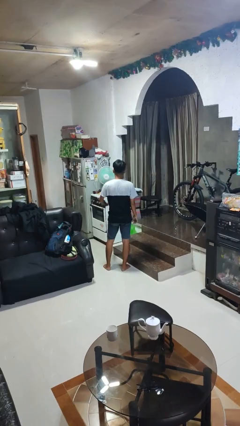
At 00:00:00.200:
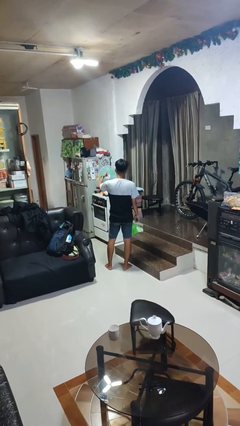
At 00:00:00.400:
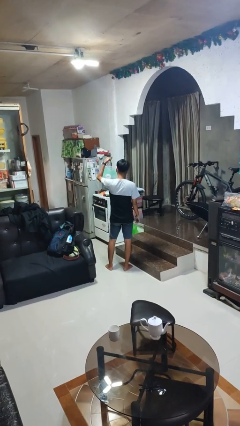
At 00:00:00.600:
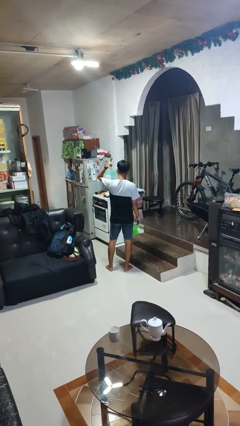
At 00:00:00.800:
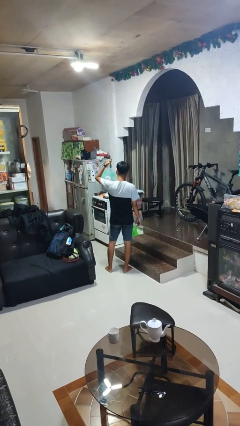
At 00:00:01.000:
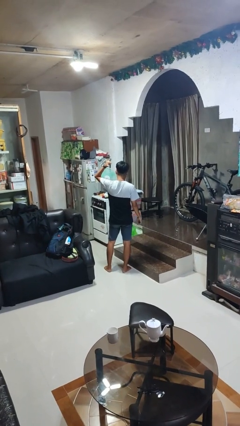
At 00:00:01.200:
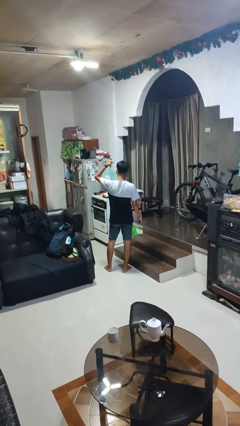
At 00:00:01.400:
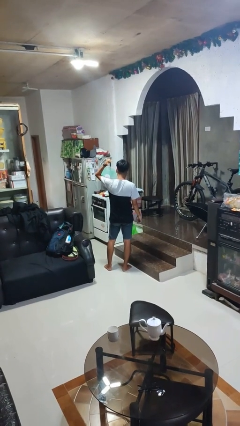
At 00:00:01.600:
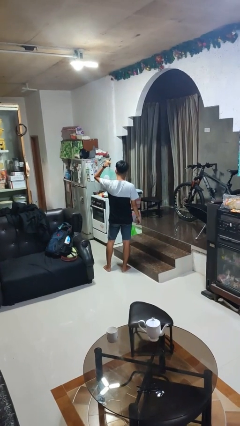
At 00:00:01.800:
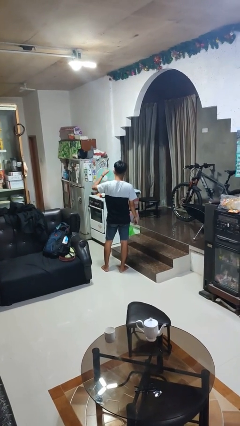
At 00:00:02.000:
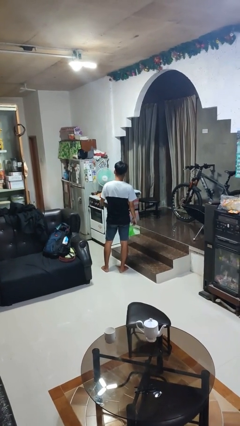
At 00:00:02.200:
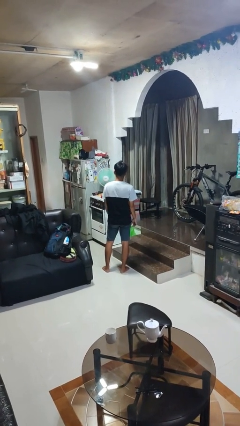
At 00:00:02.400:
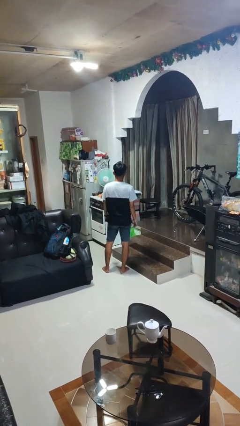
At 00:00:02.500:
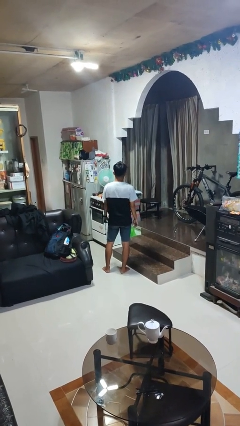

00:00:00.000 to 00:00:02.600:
person gestures behind me

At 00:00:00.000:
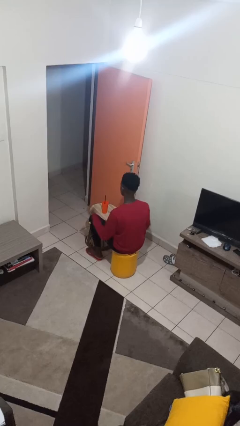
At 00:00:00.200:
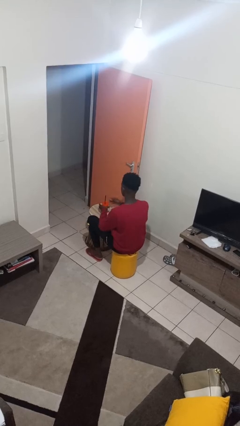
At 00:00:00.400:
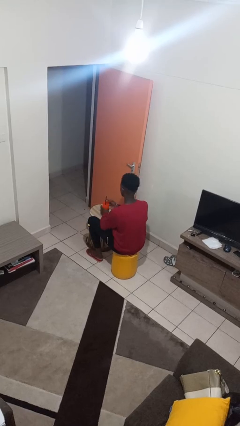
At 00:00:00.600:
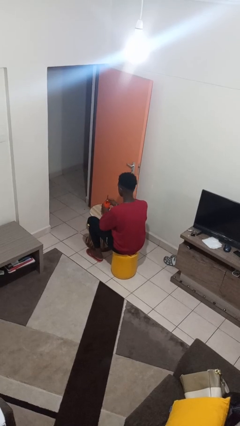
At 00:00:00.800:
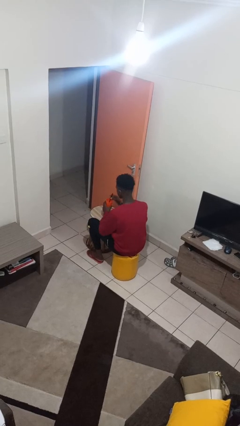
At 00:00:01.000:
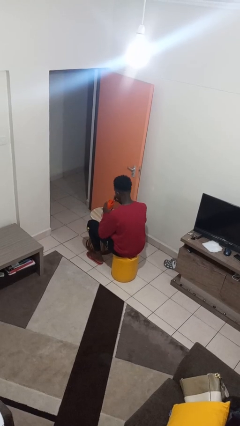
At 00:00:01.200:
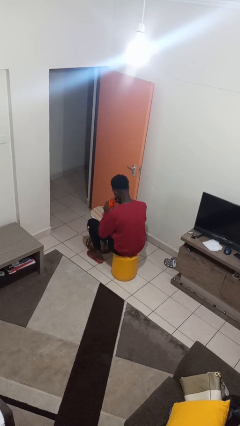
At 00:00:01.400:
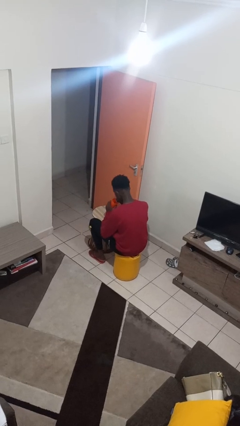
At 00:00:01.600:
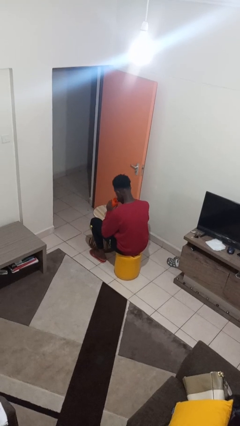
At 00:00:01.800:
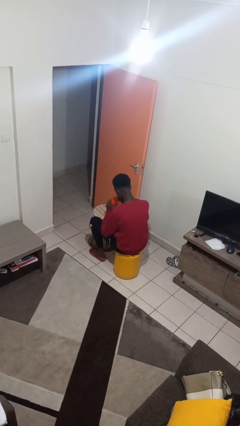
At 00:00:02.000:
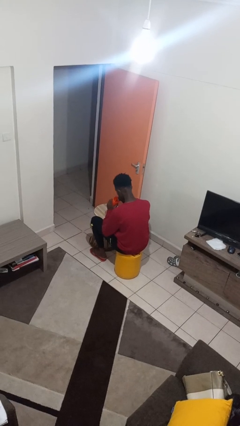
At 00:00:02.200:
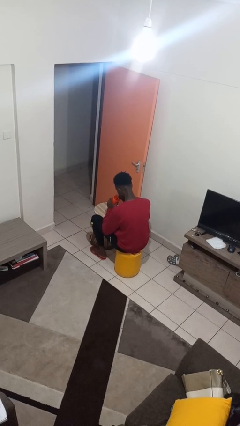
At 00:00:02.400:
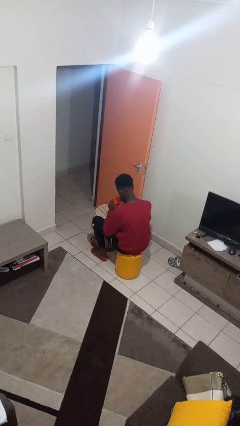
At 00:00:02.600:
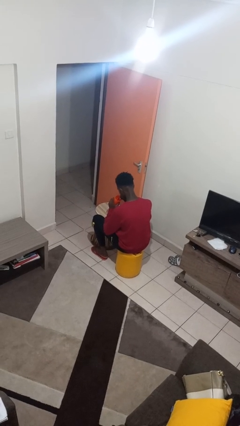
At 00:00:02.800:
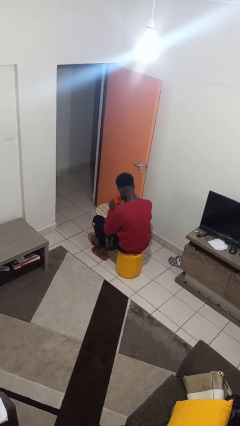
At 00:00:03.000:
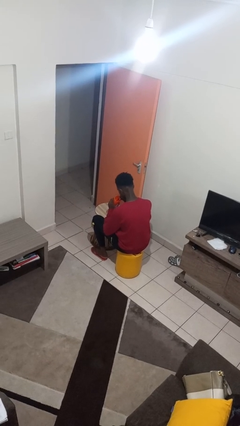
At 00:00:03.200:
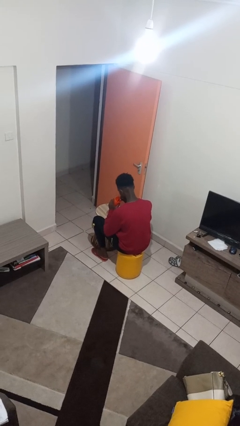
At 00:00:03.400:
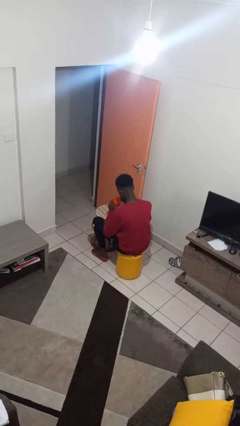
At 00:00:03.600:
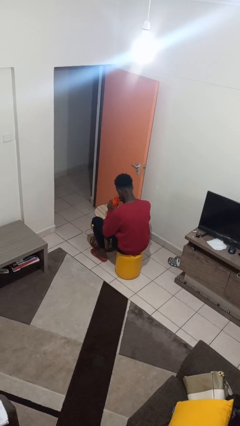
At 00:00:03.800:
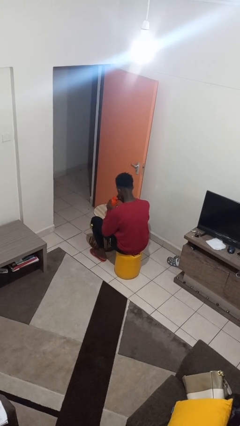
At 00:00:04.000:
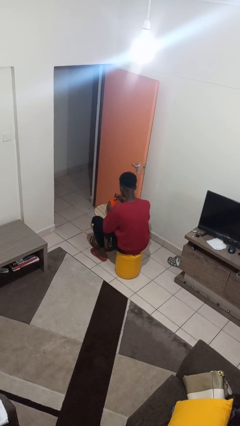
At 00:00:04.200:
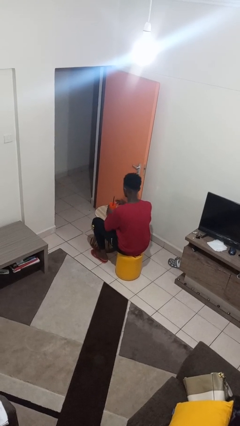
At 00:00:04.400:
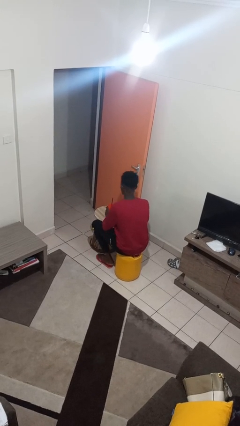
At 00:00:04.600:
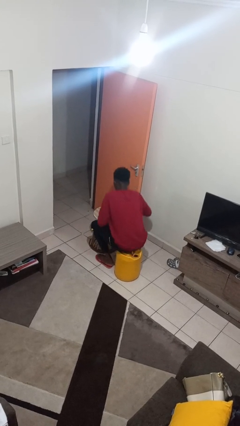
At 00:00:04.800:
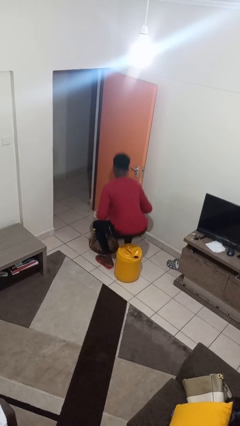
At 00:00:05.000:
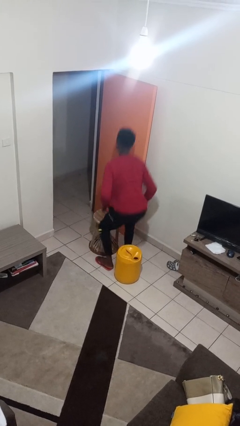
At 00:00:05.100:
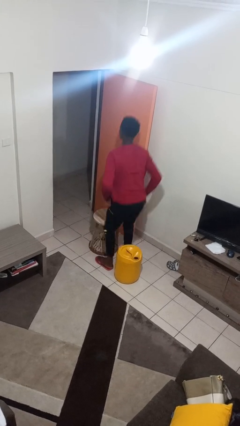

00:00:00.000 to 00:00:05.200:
person drinks from straw

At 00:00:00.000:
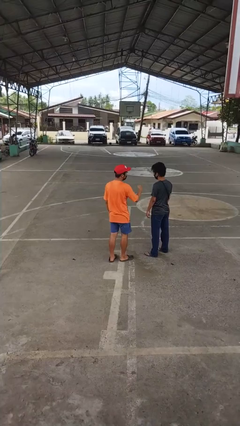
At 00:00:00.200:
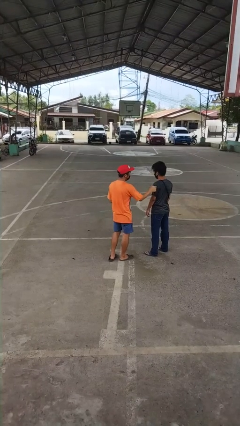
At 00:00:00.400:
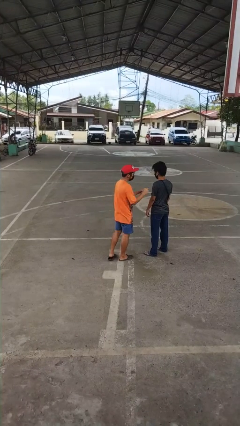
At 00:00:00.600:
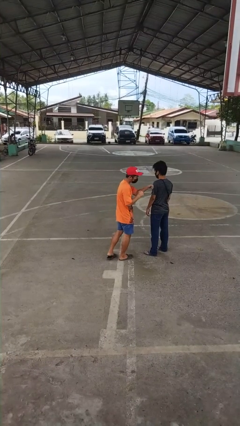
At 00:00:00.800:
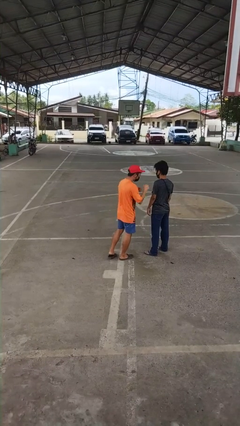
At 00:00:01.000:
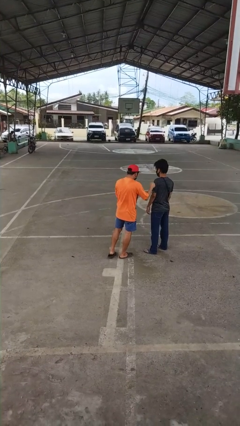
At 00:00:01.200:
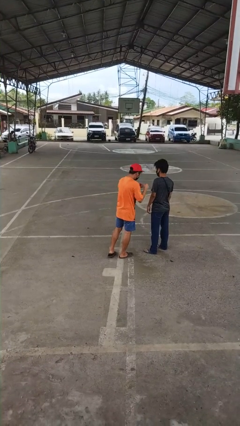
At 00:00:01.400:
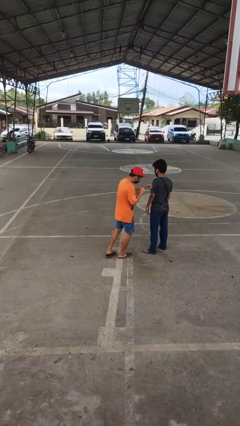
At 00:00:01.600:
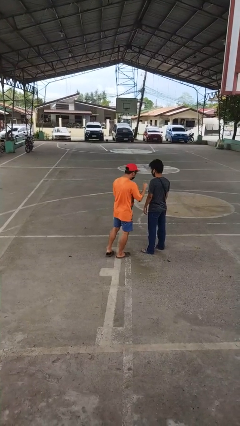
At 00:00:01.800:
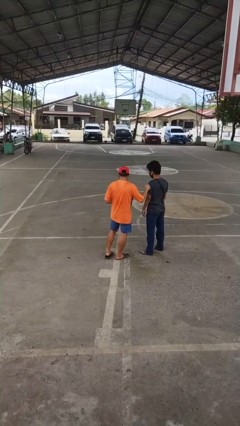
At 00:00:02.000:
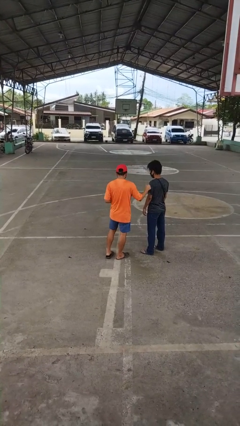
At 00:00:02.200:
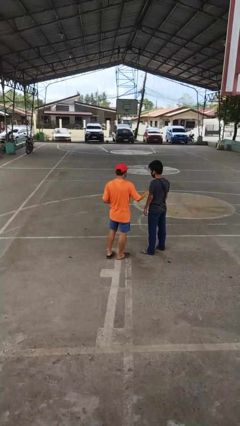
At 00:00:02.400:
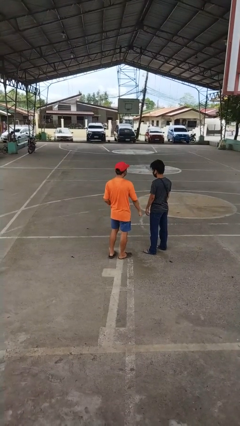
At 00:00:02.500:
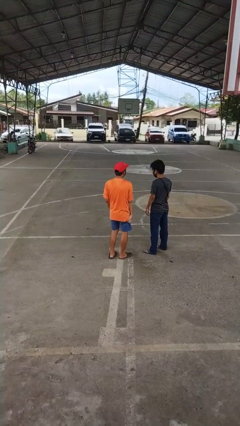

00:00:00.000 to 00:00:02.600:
person pounds shoulders of person

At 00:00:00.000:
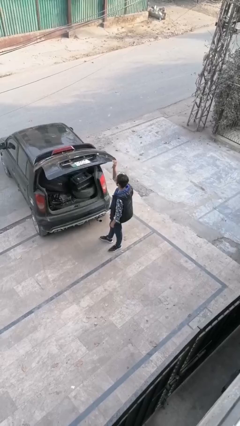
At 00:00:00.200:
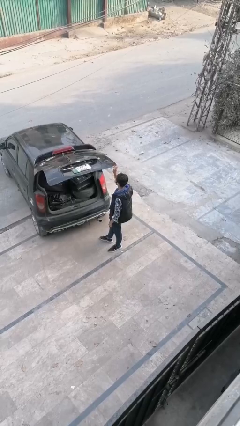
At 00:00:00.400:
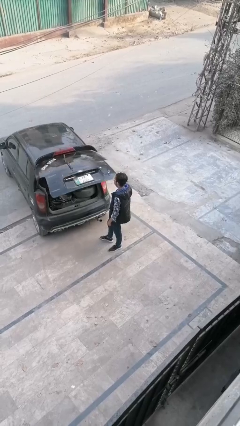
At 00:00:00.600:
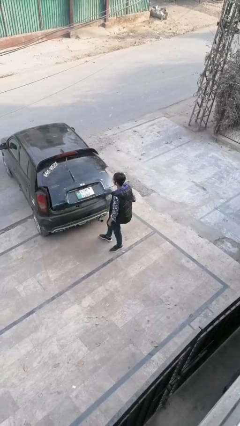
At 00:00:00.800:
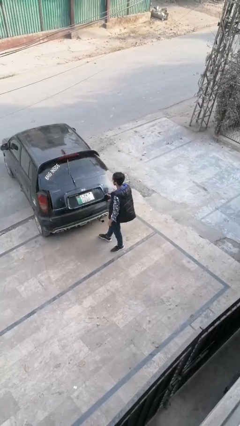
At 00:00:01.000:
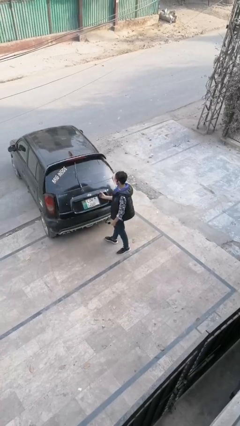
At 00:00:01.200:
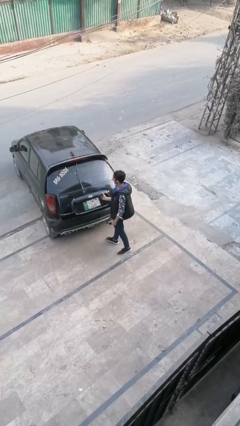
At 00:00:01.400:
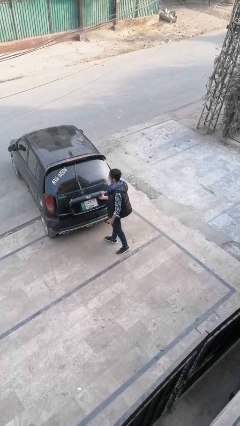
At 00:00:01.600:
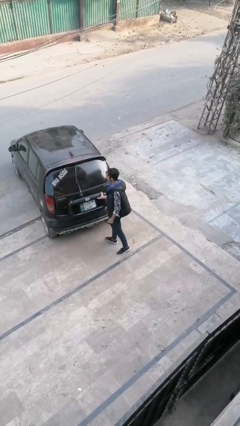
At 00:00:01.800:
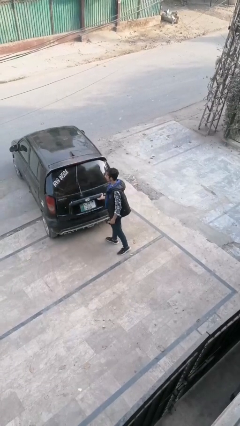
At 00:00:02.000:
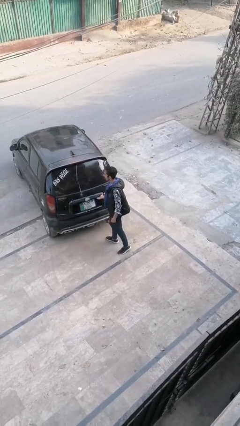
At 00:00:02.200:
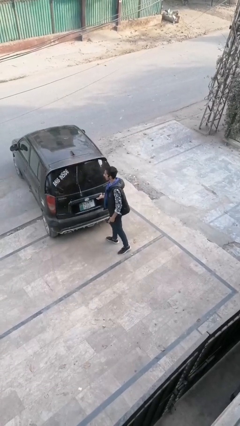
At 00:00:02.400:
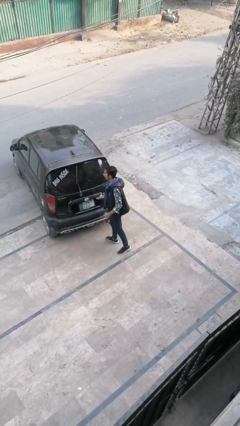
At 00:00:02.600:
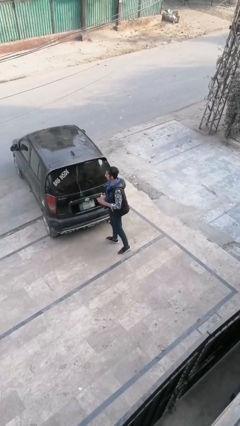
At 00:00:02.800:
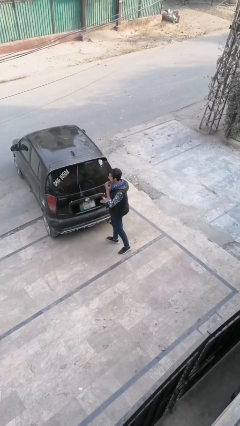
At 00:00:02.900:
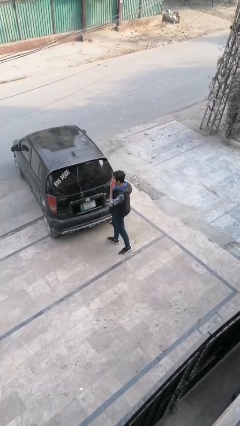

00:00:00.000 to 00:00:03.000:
person closes car trunk

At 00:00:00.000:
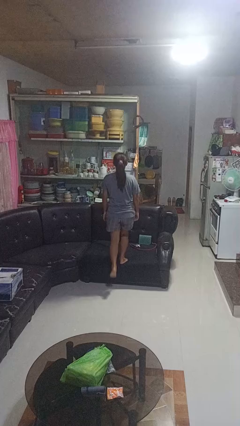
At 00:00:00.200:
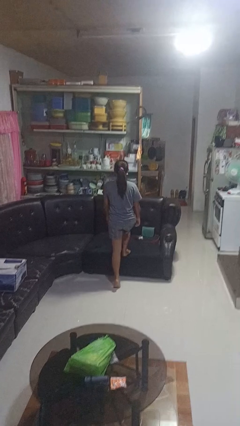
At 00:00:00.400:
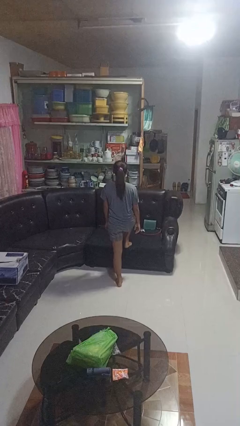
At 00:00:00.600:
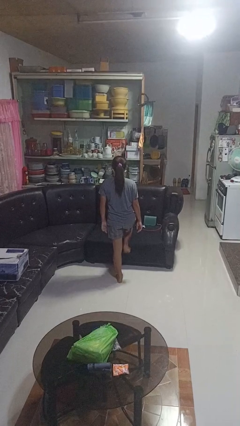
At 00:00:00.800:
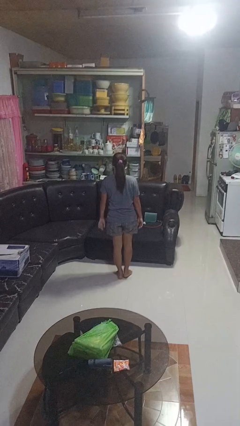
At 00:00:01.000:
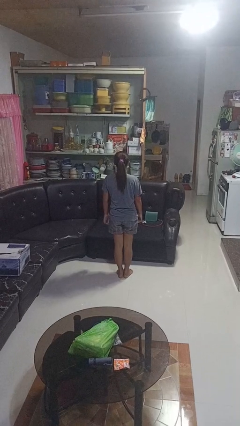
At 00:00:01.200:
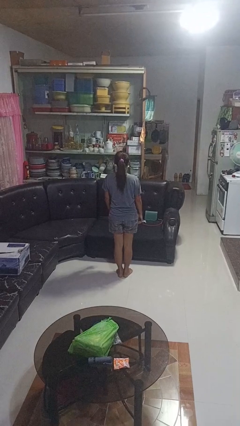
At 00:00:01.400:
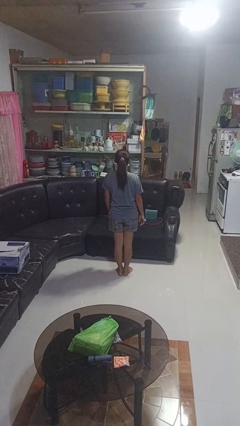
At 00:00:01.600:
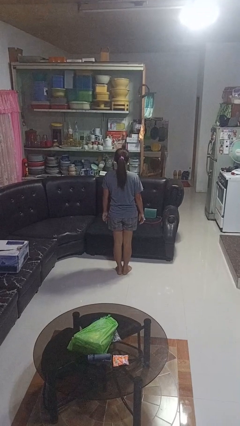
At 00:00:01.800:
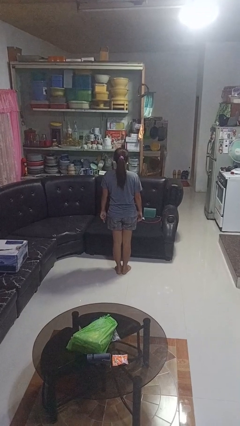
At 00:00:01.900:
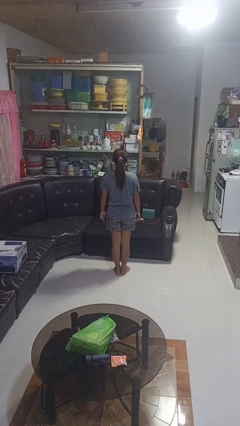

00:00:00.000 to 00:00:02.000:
person climbs off couch

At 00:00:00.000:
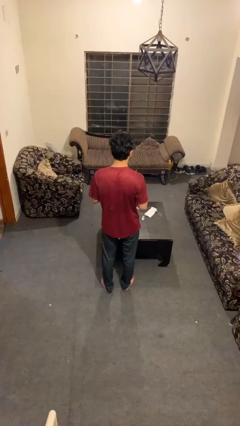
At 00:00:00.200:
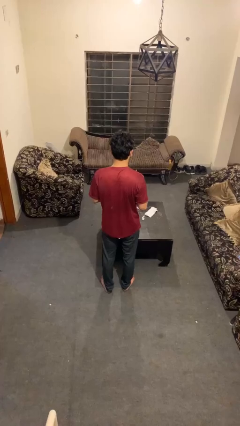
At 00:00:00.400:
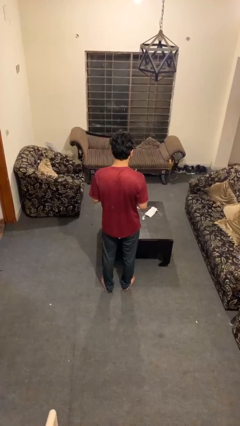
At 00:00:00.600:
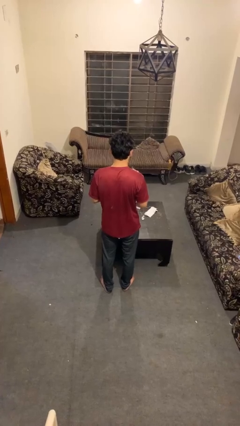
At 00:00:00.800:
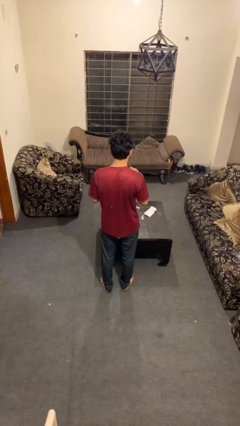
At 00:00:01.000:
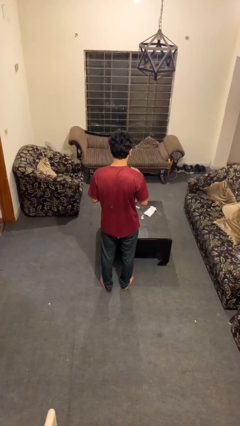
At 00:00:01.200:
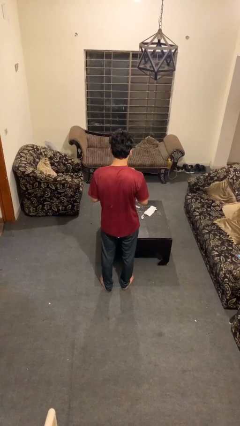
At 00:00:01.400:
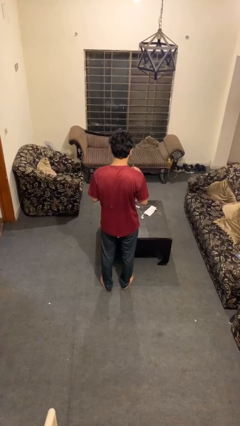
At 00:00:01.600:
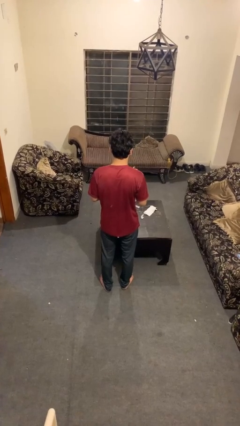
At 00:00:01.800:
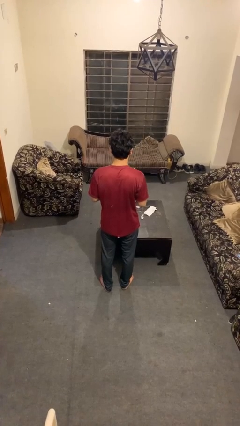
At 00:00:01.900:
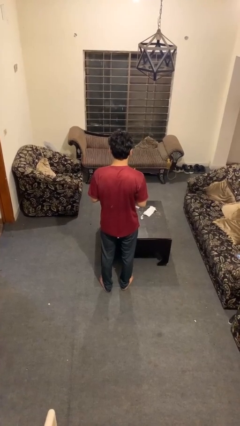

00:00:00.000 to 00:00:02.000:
person stirs mug
